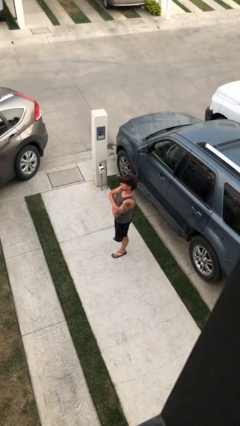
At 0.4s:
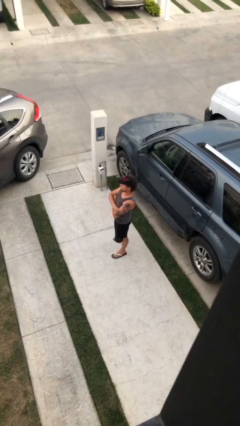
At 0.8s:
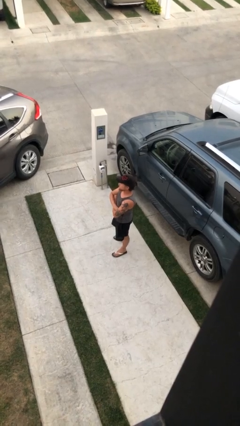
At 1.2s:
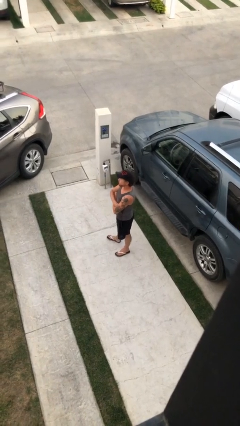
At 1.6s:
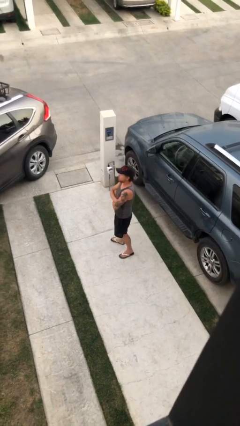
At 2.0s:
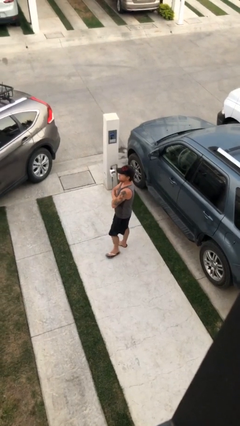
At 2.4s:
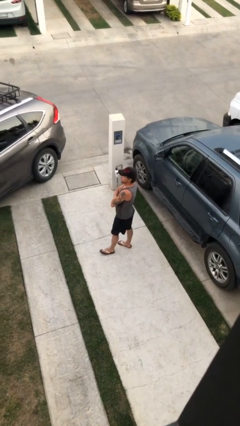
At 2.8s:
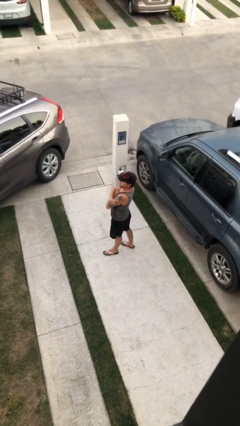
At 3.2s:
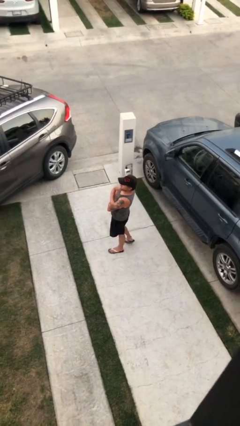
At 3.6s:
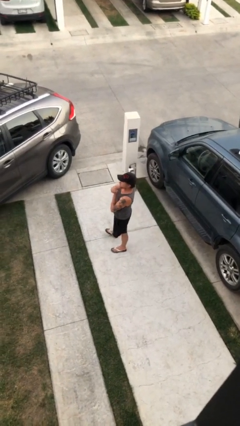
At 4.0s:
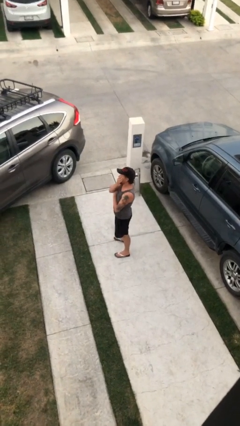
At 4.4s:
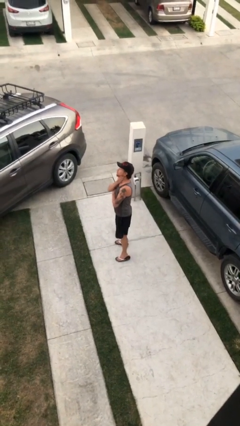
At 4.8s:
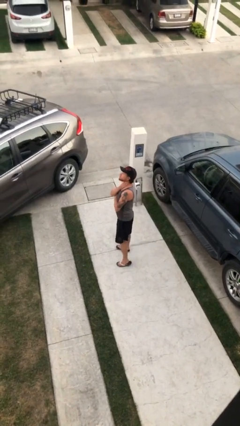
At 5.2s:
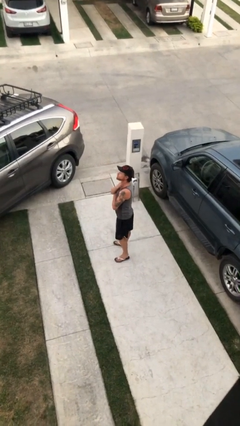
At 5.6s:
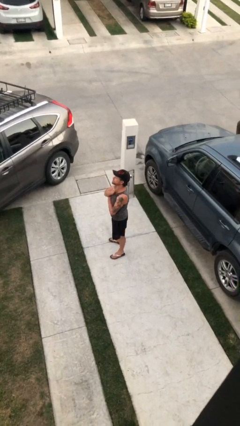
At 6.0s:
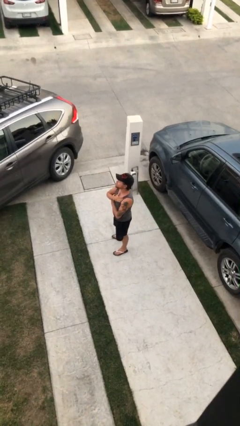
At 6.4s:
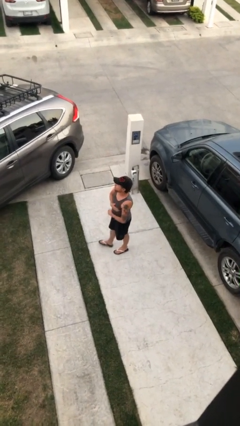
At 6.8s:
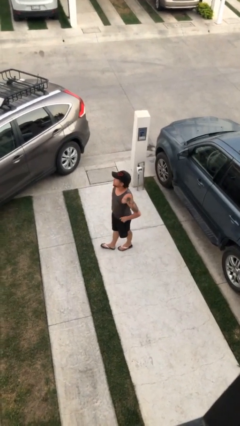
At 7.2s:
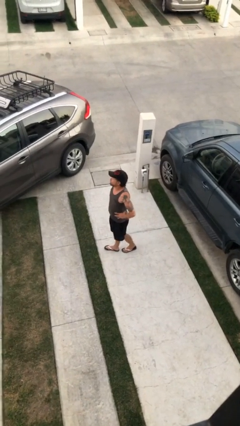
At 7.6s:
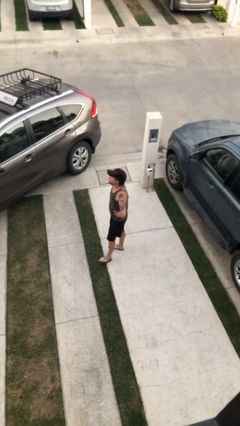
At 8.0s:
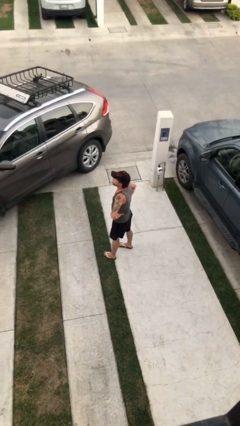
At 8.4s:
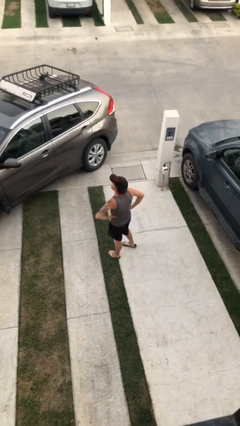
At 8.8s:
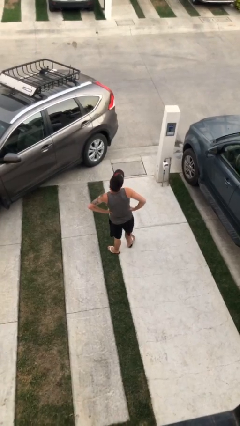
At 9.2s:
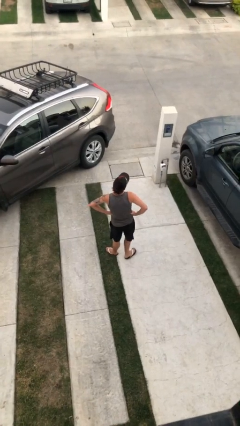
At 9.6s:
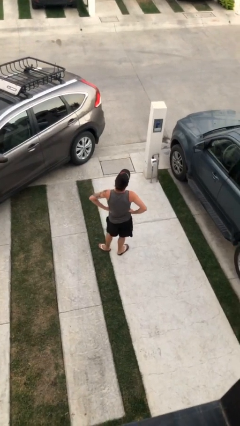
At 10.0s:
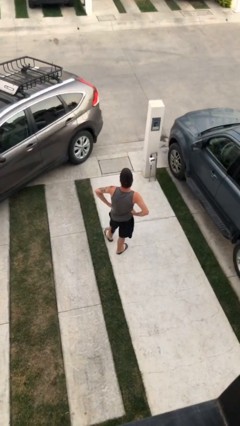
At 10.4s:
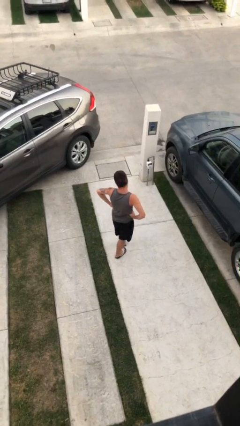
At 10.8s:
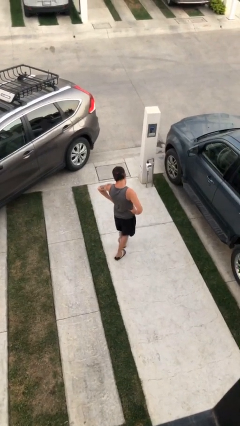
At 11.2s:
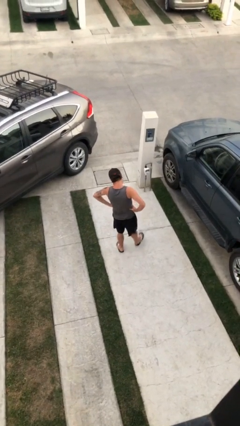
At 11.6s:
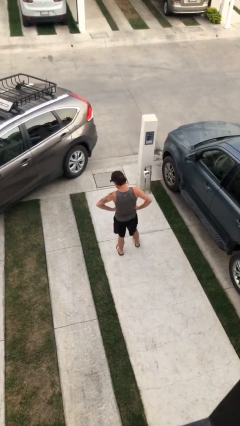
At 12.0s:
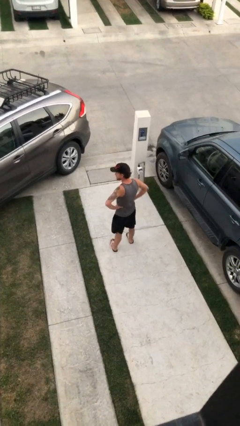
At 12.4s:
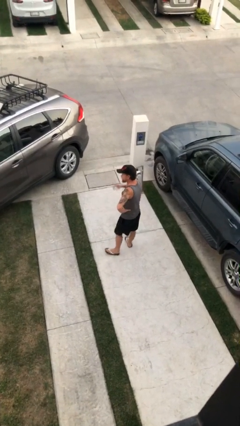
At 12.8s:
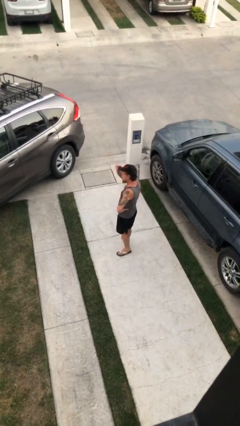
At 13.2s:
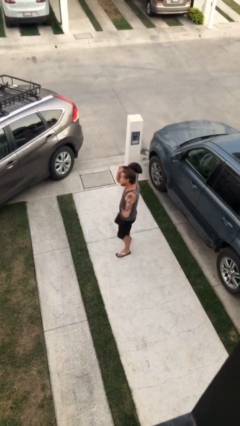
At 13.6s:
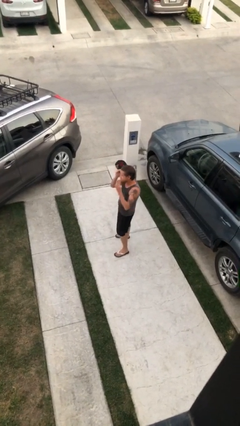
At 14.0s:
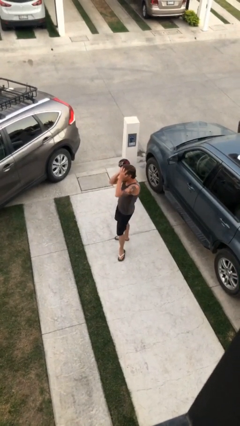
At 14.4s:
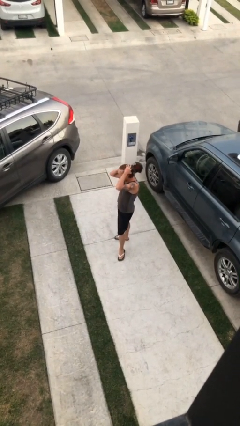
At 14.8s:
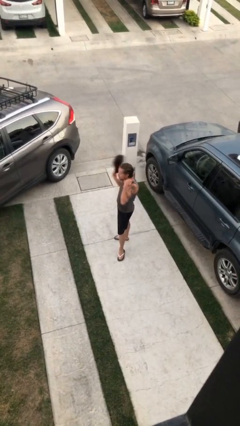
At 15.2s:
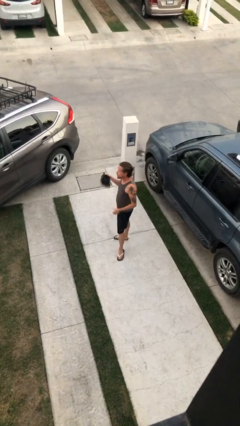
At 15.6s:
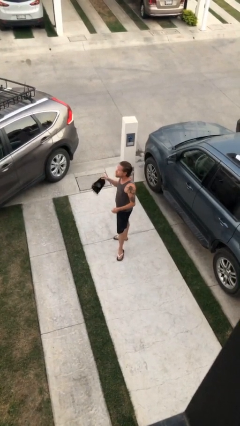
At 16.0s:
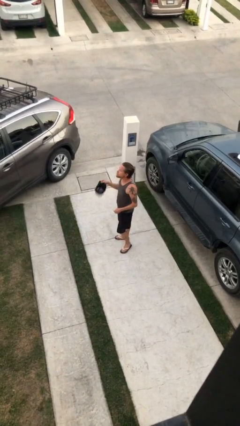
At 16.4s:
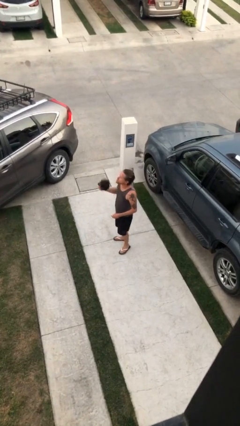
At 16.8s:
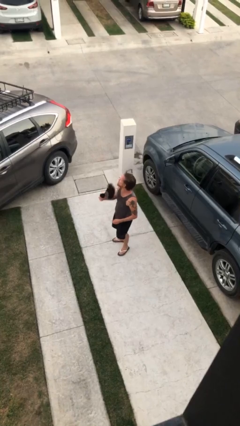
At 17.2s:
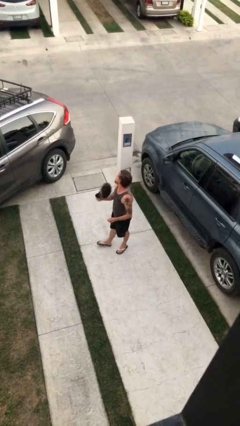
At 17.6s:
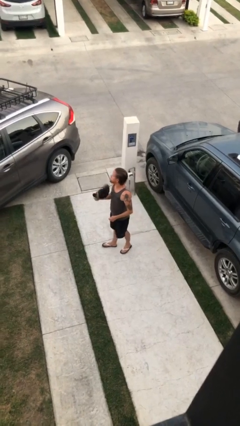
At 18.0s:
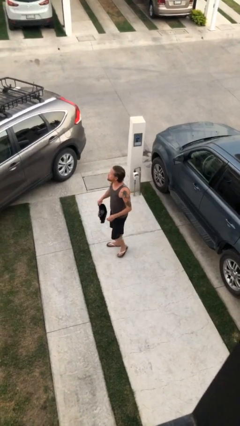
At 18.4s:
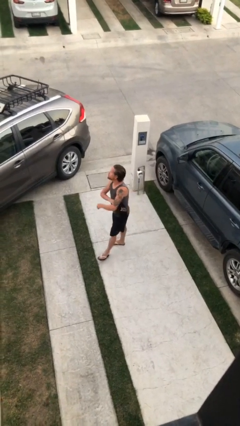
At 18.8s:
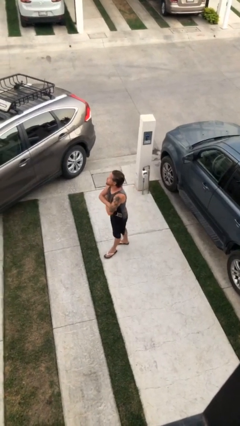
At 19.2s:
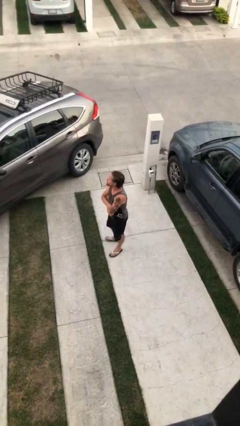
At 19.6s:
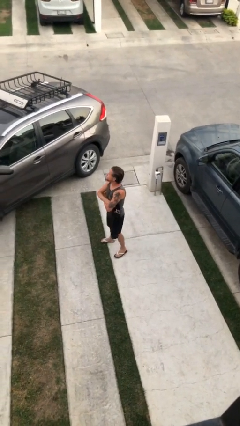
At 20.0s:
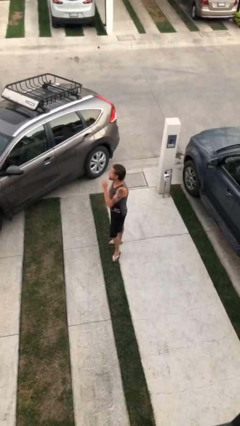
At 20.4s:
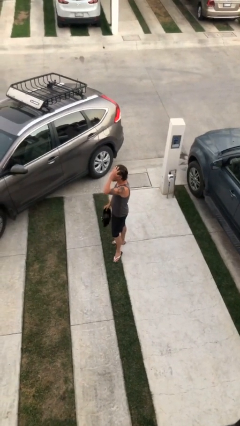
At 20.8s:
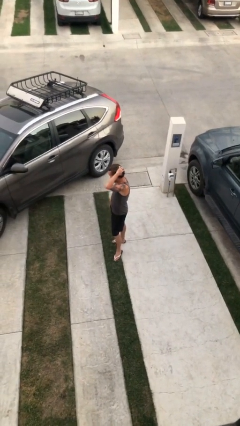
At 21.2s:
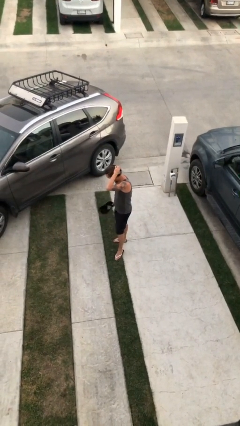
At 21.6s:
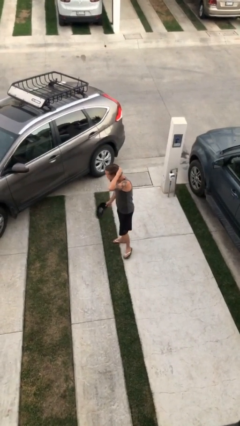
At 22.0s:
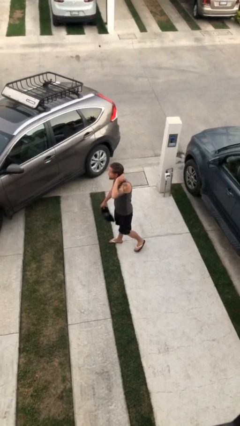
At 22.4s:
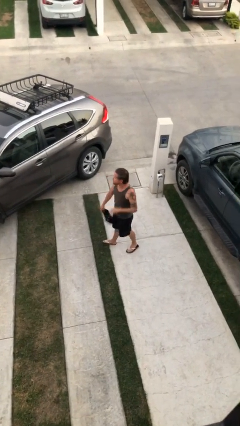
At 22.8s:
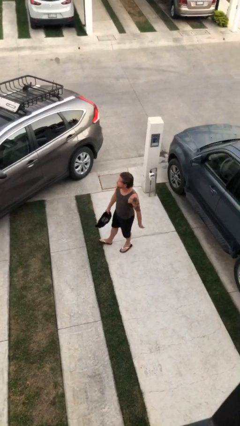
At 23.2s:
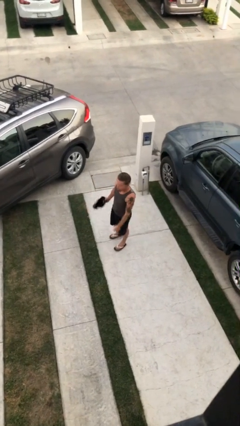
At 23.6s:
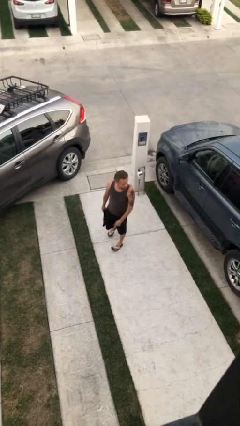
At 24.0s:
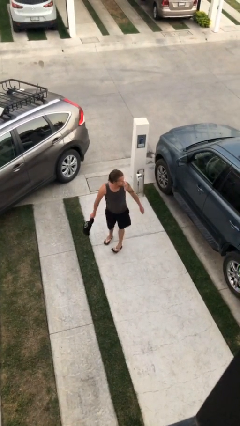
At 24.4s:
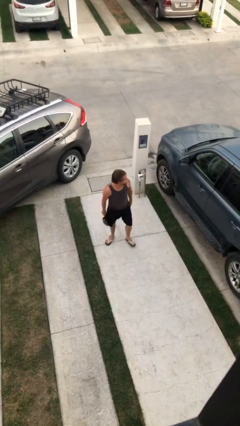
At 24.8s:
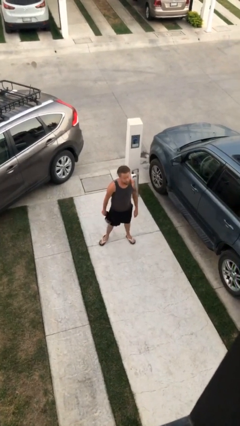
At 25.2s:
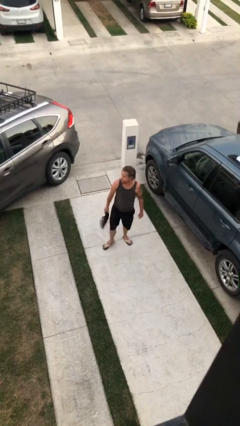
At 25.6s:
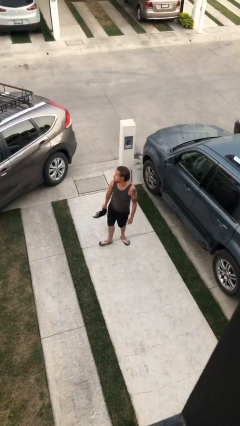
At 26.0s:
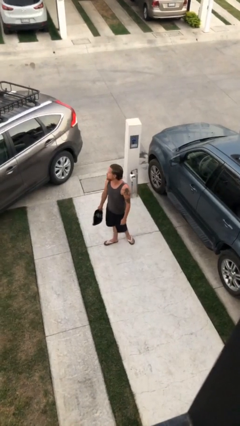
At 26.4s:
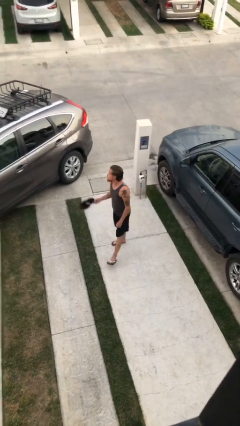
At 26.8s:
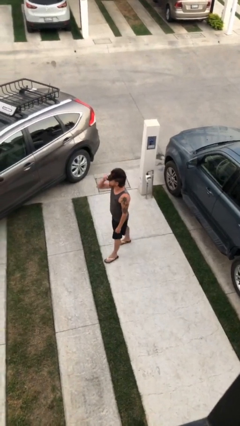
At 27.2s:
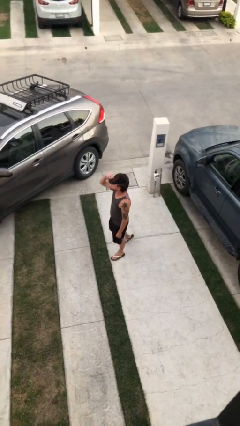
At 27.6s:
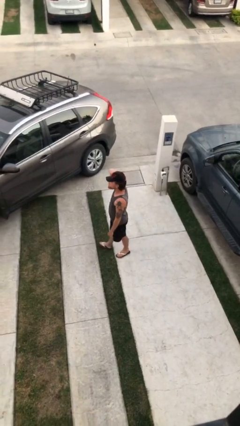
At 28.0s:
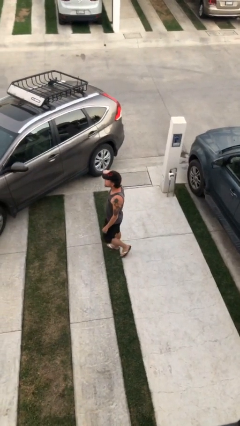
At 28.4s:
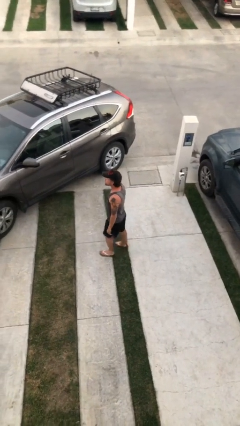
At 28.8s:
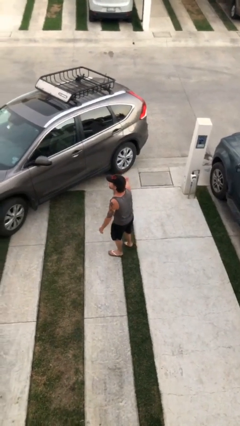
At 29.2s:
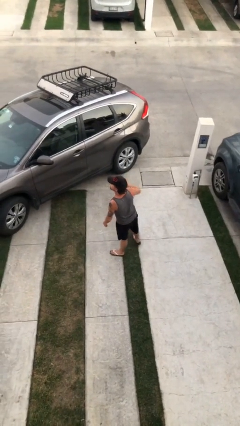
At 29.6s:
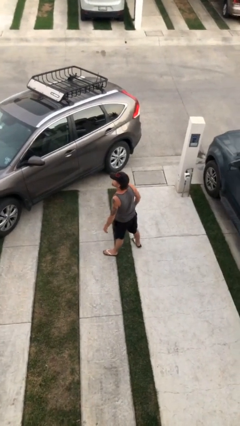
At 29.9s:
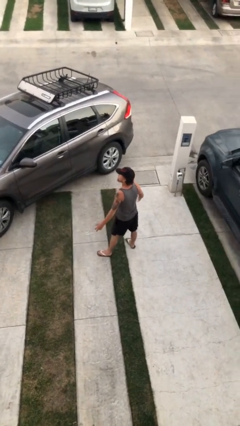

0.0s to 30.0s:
person walks

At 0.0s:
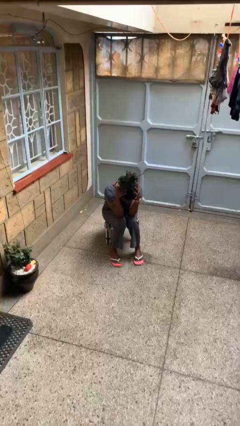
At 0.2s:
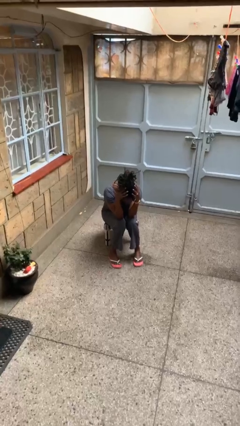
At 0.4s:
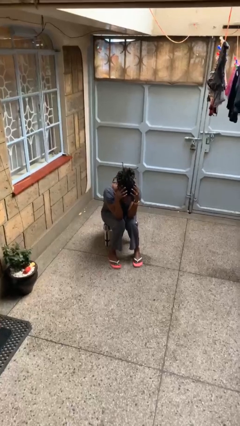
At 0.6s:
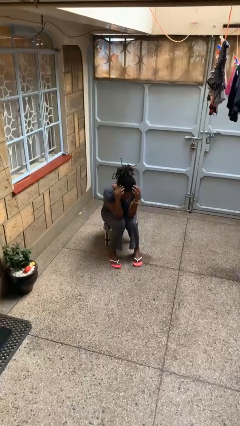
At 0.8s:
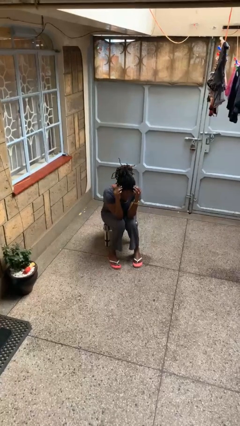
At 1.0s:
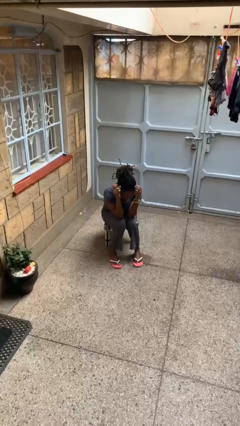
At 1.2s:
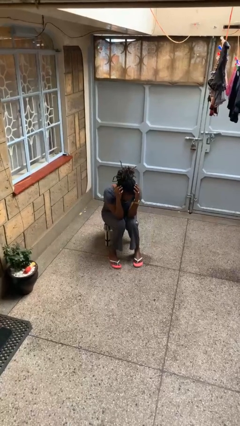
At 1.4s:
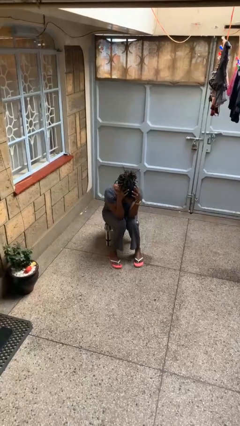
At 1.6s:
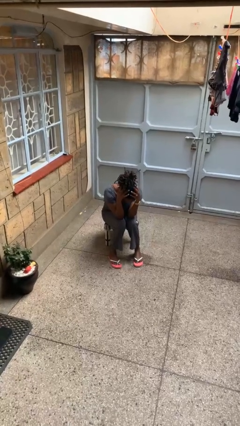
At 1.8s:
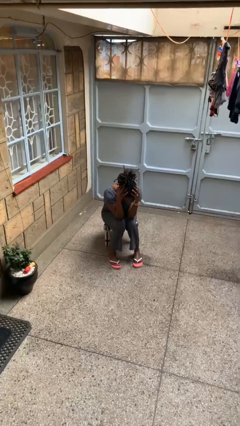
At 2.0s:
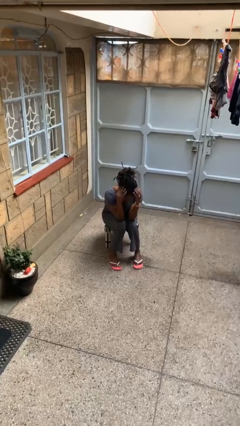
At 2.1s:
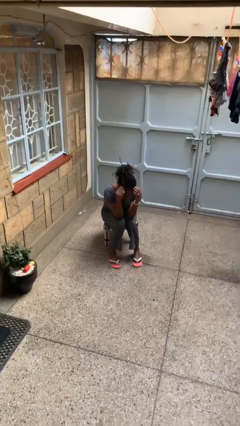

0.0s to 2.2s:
person strokes hair

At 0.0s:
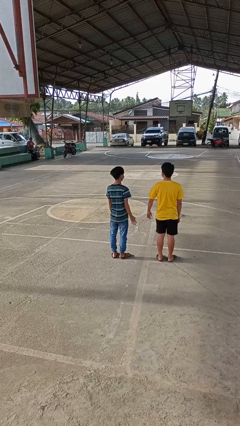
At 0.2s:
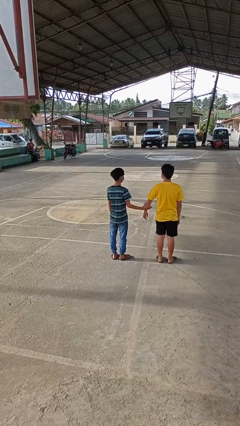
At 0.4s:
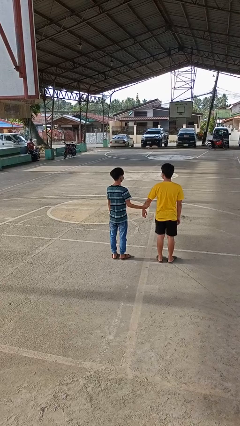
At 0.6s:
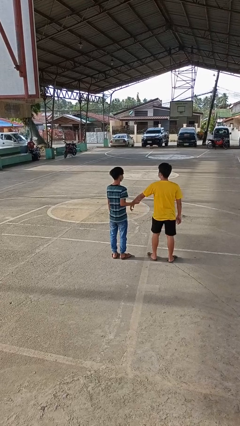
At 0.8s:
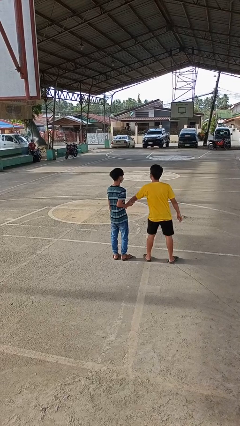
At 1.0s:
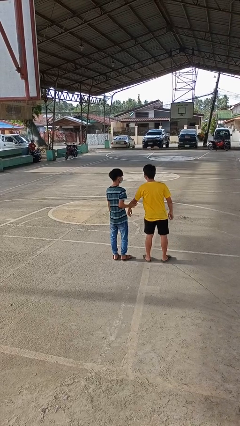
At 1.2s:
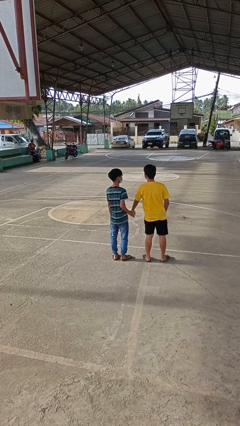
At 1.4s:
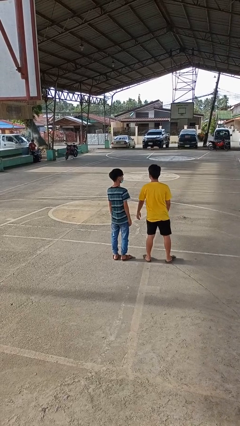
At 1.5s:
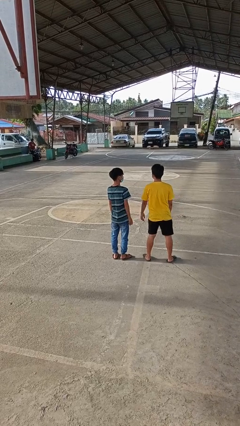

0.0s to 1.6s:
person grabs person by forearm
